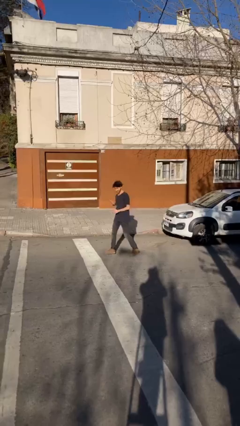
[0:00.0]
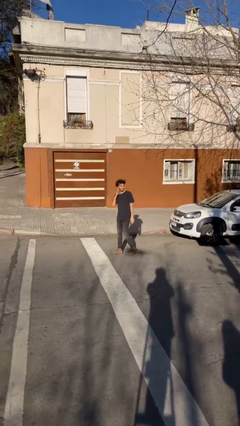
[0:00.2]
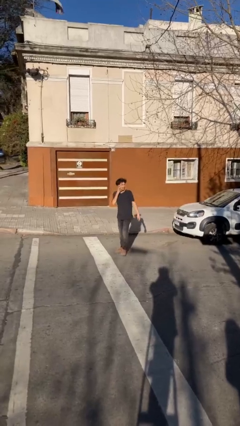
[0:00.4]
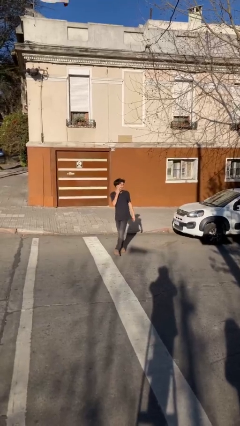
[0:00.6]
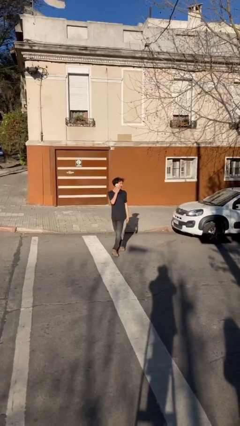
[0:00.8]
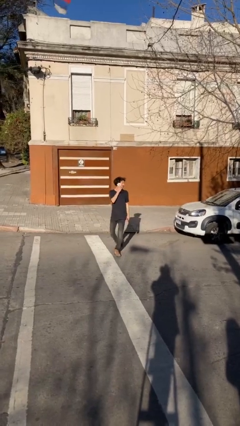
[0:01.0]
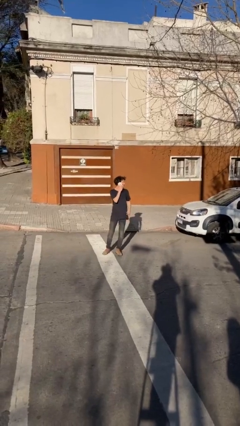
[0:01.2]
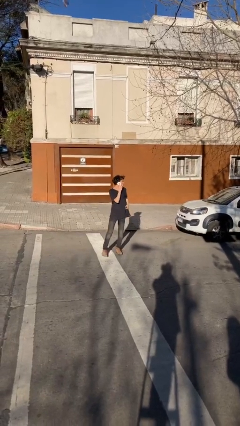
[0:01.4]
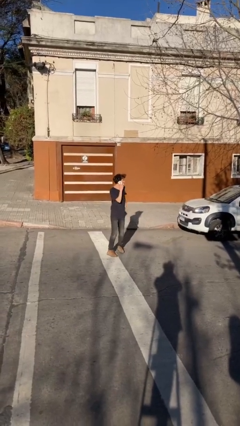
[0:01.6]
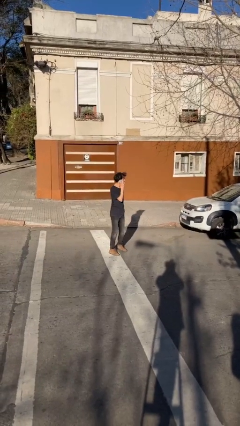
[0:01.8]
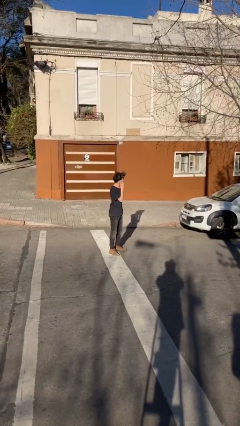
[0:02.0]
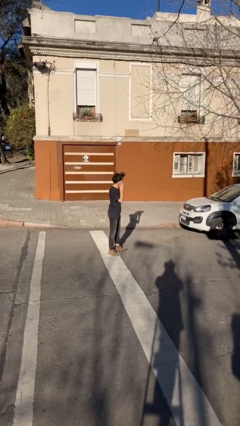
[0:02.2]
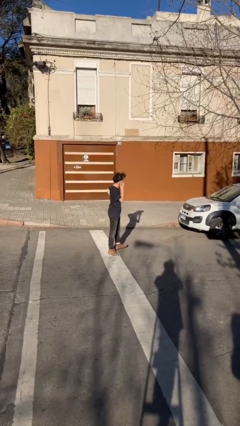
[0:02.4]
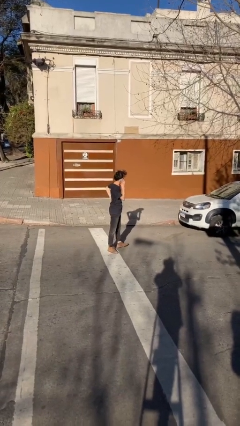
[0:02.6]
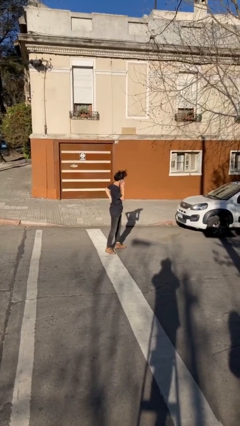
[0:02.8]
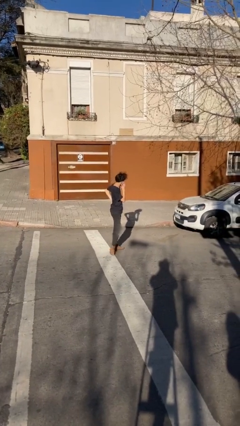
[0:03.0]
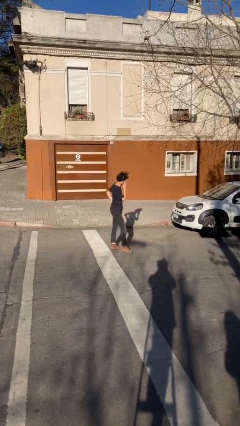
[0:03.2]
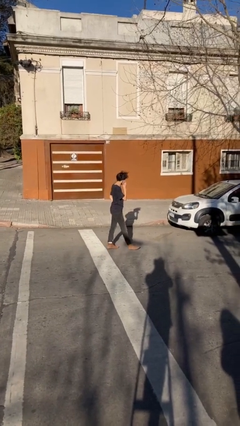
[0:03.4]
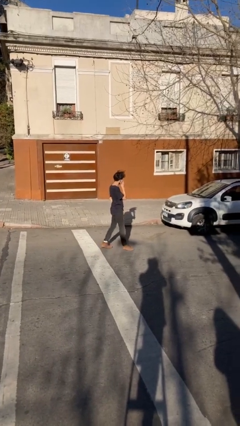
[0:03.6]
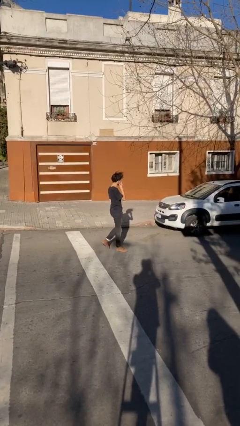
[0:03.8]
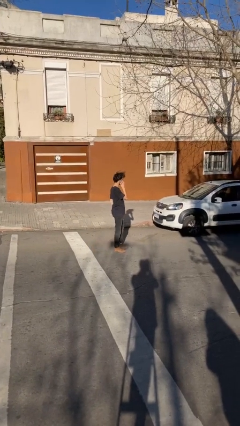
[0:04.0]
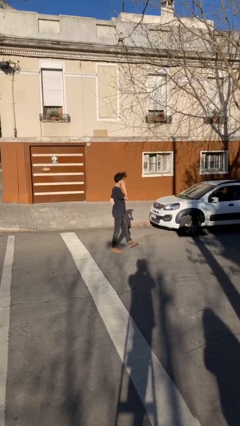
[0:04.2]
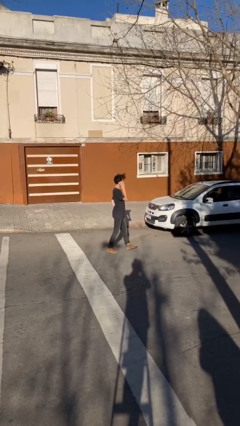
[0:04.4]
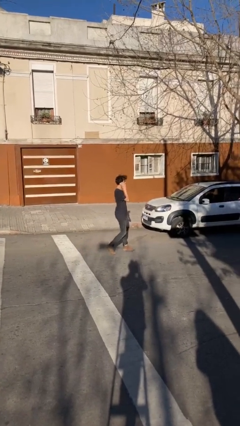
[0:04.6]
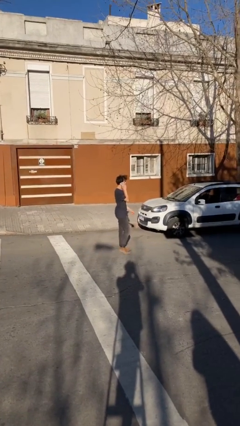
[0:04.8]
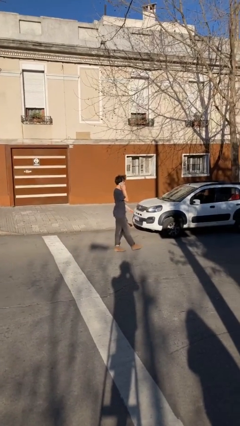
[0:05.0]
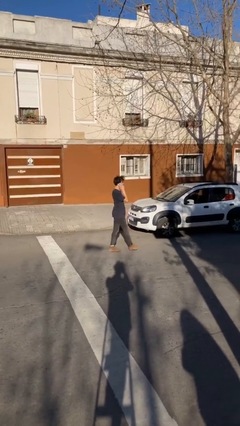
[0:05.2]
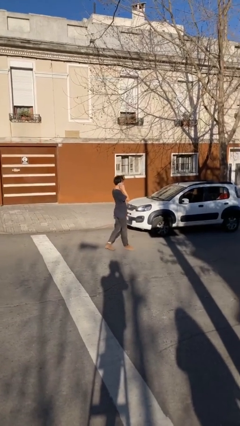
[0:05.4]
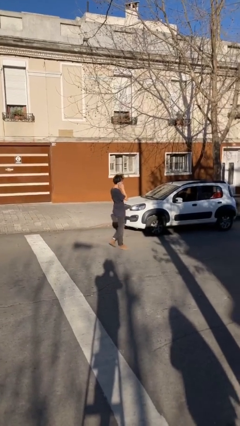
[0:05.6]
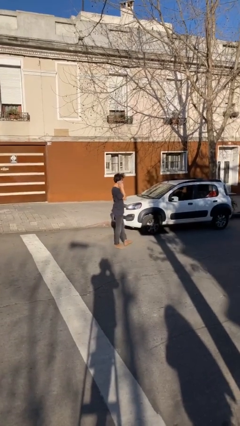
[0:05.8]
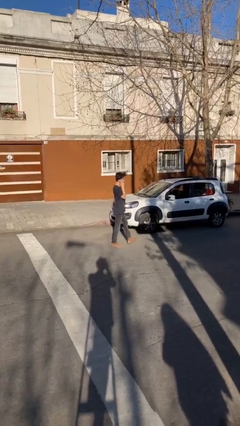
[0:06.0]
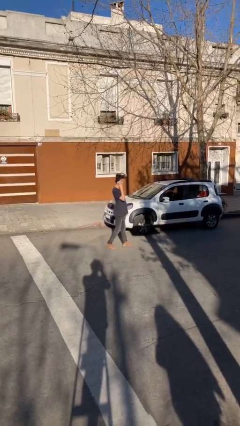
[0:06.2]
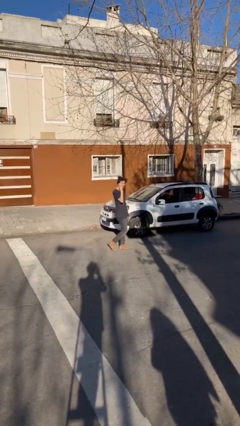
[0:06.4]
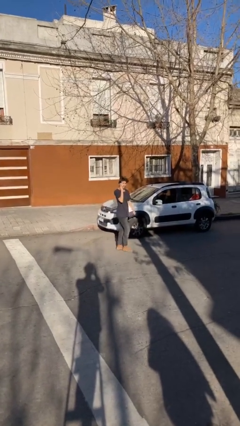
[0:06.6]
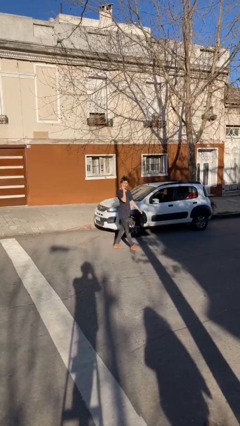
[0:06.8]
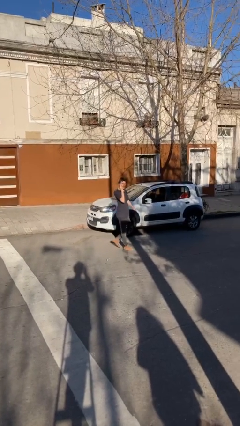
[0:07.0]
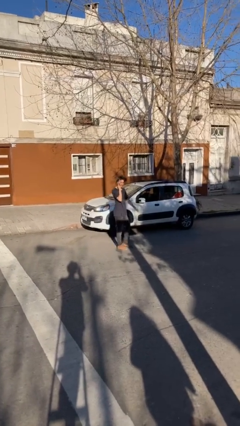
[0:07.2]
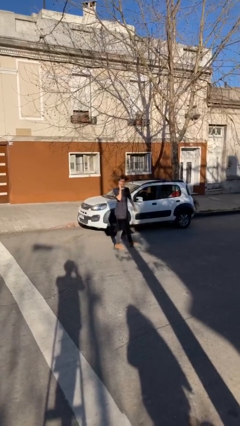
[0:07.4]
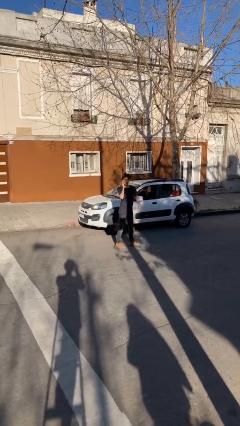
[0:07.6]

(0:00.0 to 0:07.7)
person talks on phone

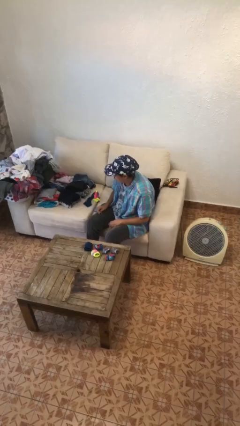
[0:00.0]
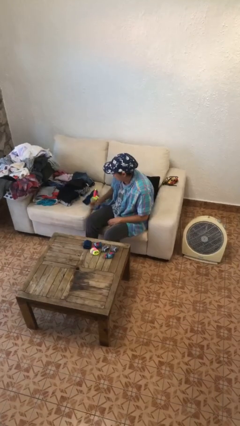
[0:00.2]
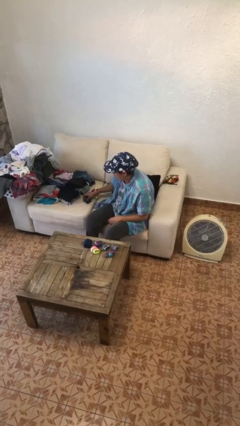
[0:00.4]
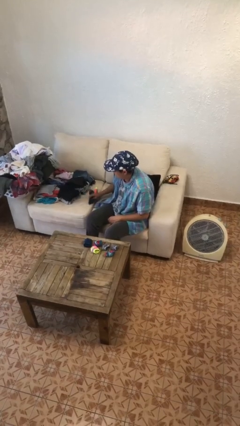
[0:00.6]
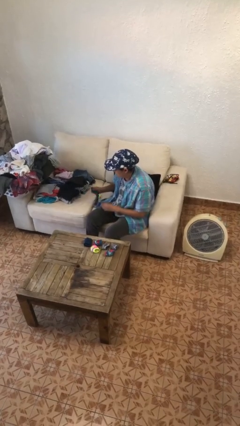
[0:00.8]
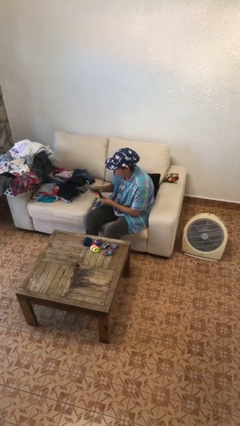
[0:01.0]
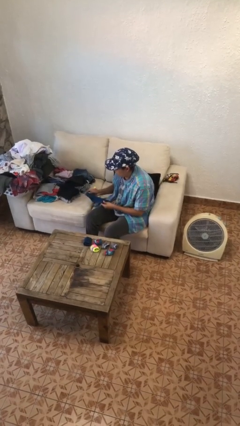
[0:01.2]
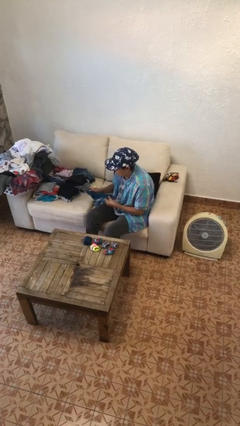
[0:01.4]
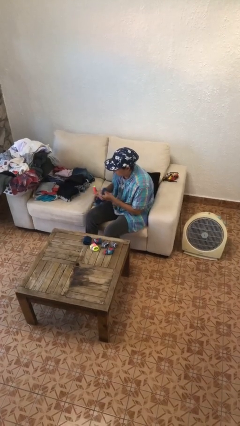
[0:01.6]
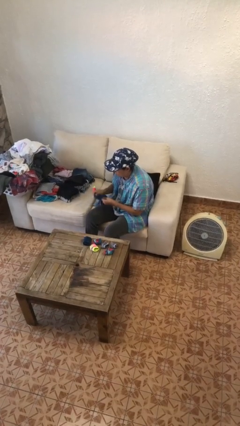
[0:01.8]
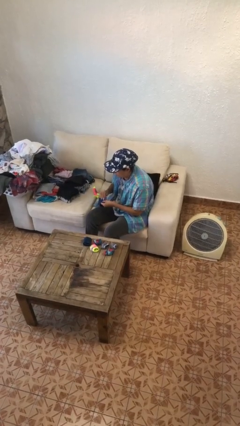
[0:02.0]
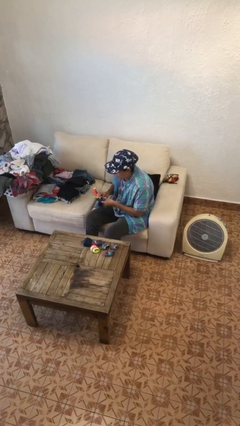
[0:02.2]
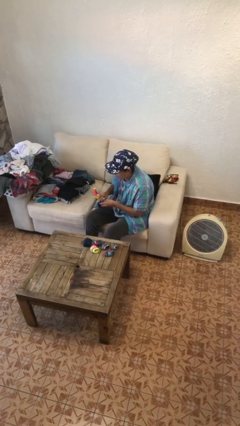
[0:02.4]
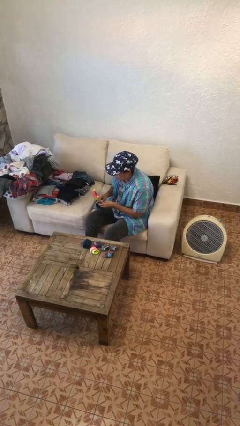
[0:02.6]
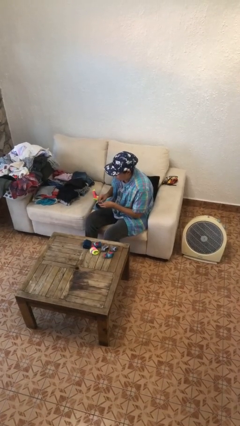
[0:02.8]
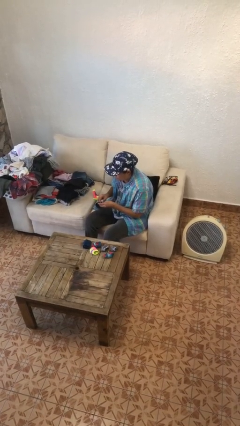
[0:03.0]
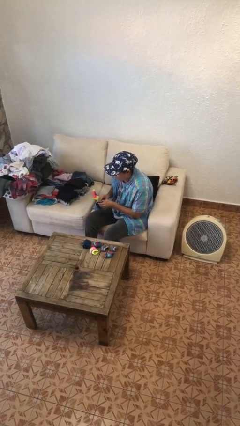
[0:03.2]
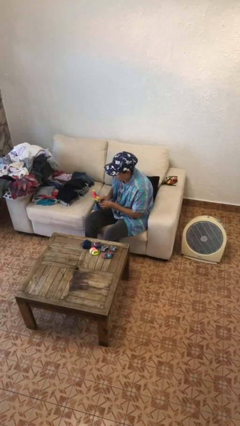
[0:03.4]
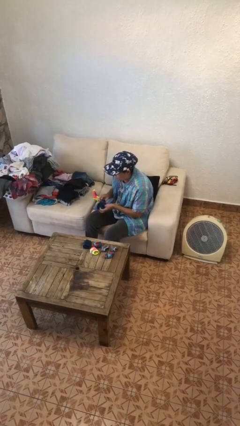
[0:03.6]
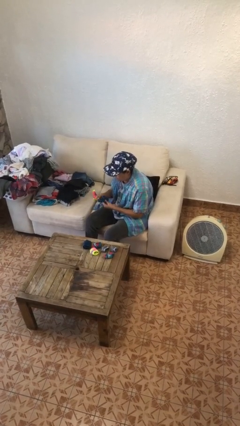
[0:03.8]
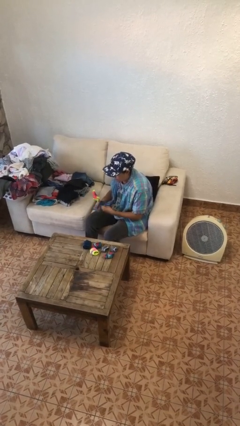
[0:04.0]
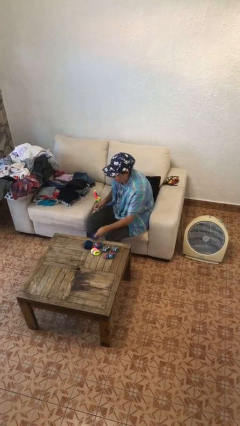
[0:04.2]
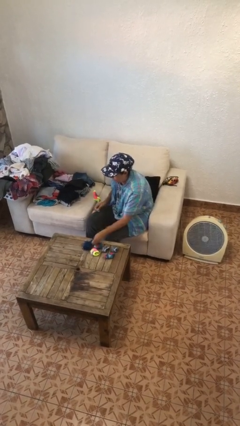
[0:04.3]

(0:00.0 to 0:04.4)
person folds socks

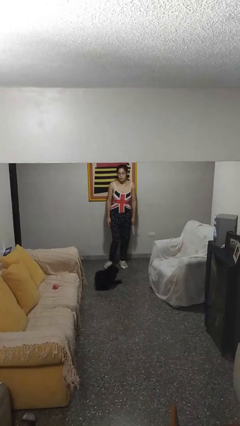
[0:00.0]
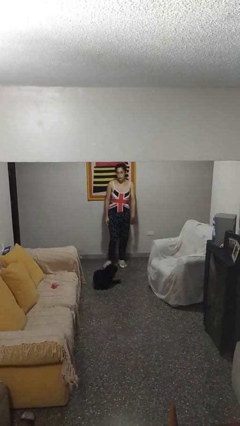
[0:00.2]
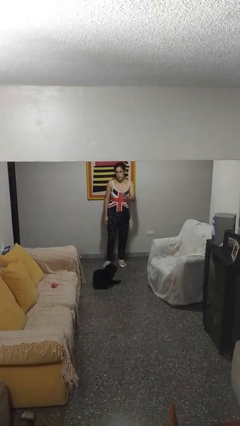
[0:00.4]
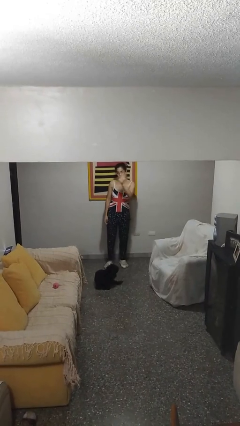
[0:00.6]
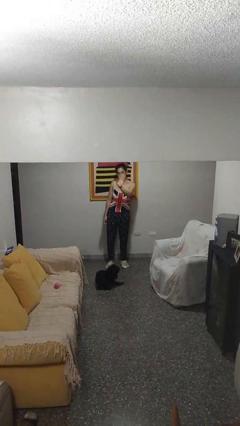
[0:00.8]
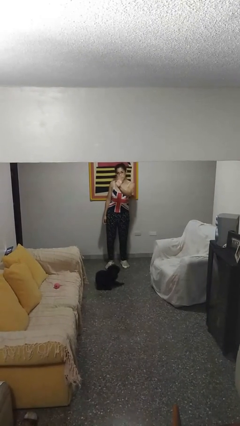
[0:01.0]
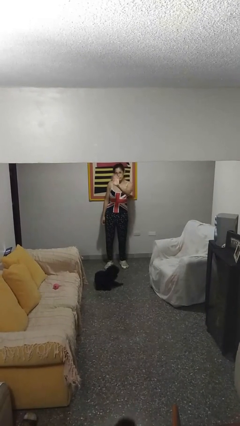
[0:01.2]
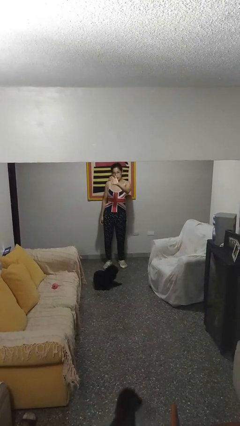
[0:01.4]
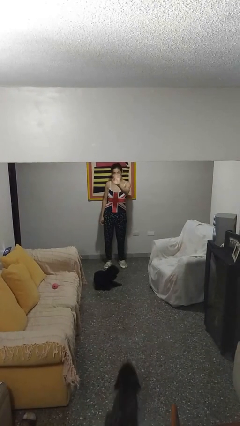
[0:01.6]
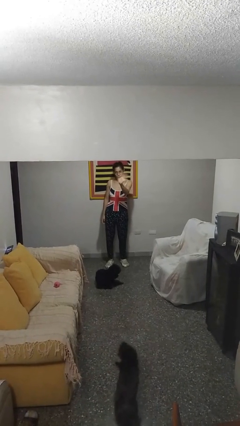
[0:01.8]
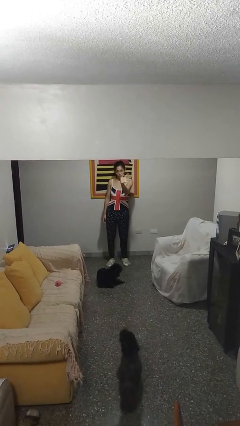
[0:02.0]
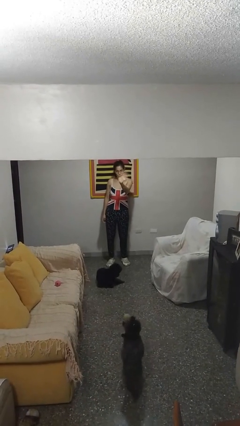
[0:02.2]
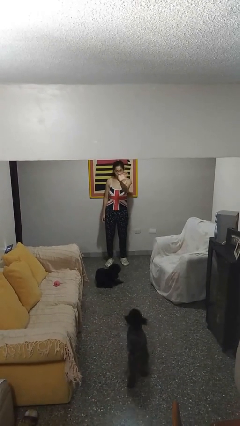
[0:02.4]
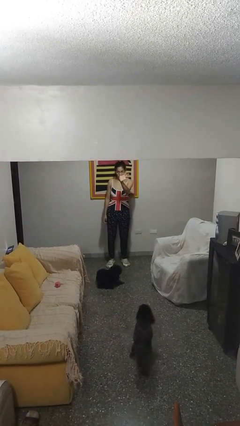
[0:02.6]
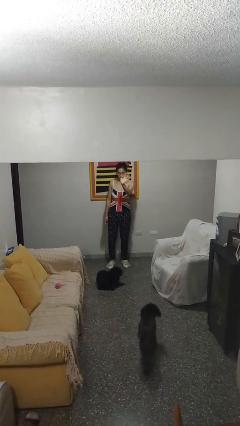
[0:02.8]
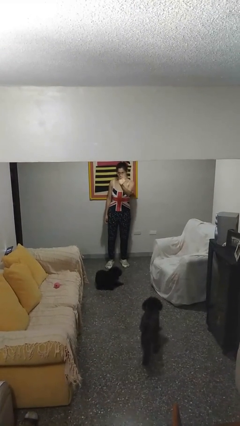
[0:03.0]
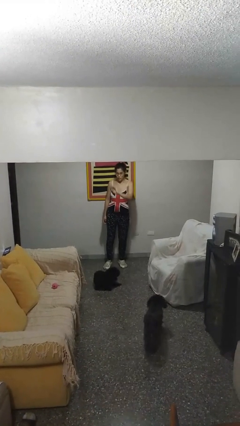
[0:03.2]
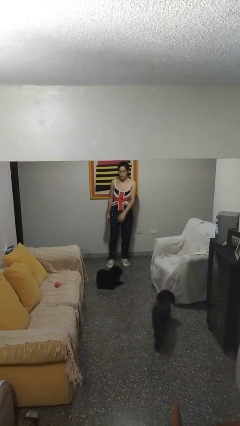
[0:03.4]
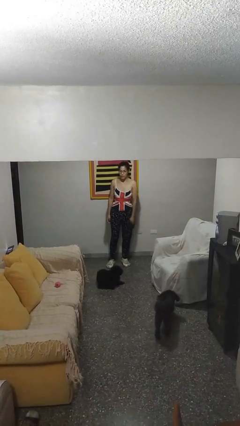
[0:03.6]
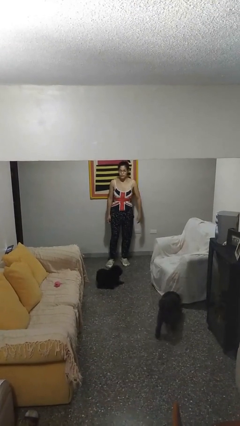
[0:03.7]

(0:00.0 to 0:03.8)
person waves at person

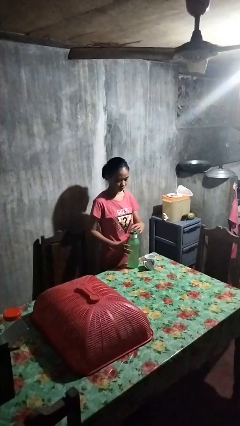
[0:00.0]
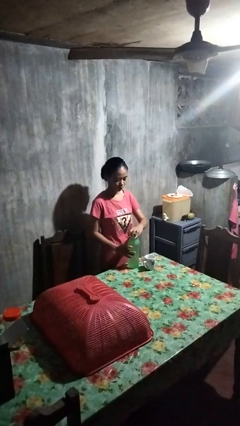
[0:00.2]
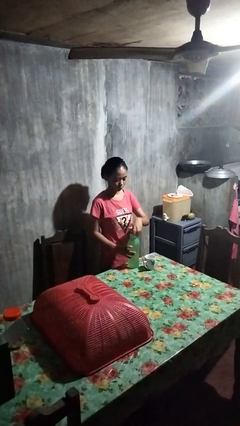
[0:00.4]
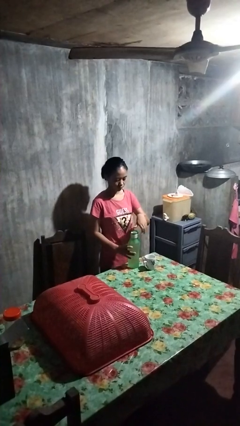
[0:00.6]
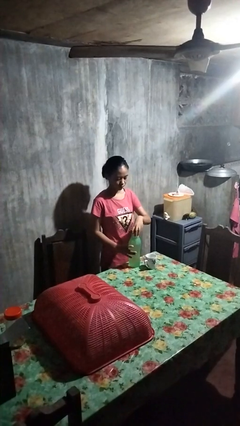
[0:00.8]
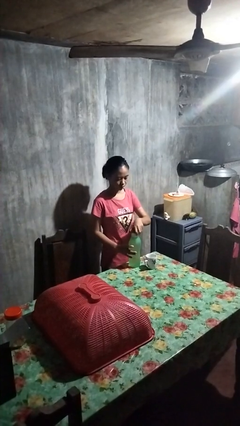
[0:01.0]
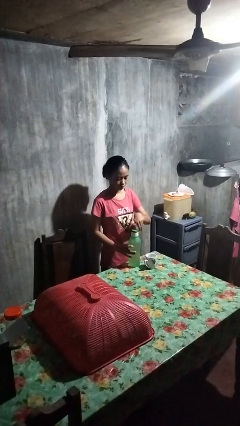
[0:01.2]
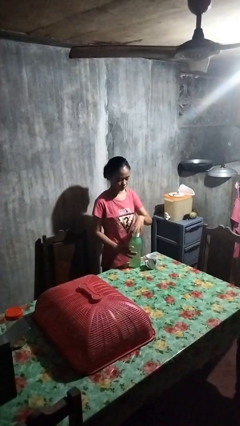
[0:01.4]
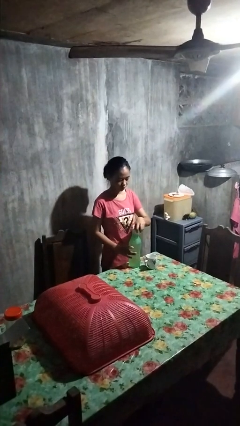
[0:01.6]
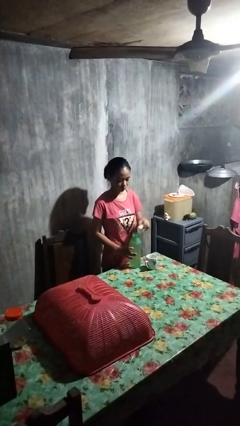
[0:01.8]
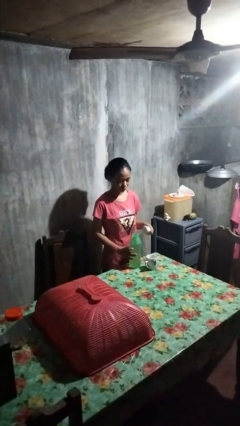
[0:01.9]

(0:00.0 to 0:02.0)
person unscrews lid from bottle
